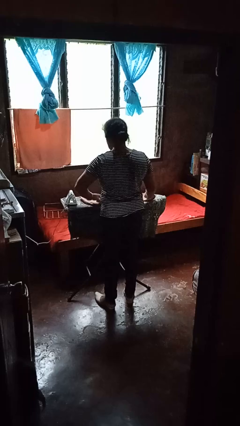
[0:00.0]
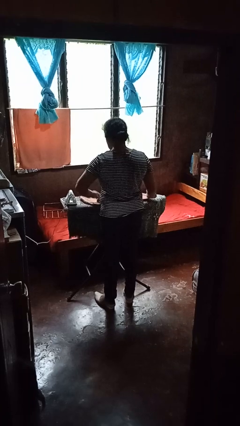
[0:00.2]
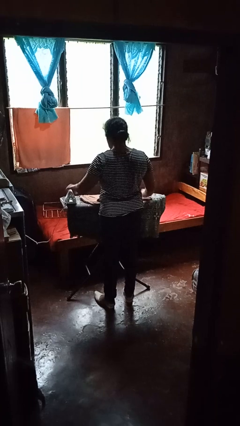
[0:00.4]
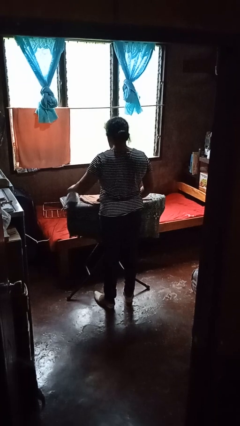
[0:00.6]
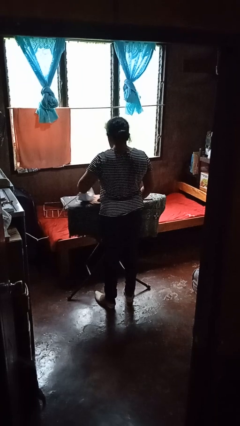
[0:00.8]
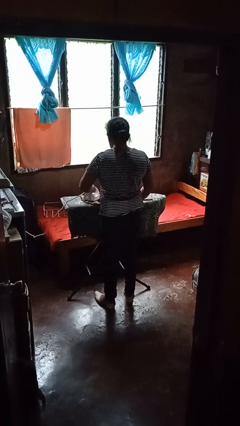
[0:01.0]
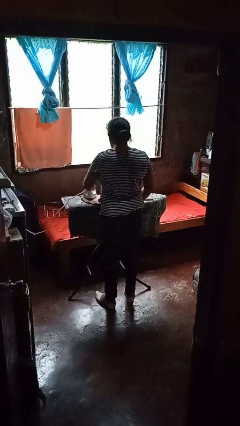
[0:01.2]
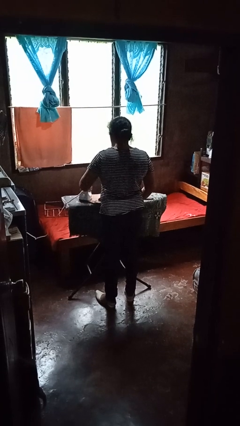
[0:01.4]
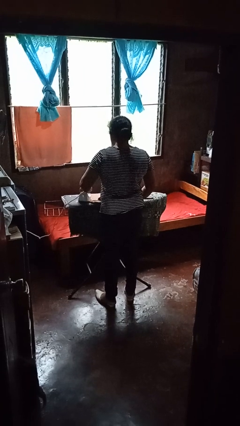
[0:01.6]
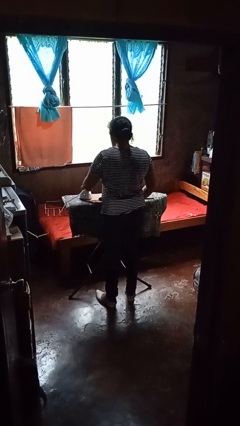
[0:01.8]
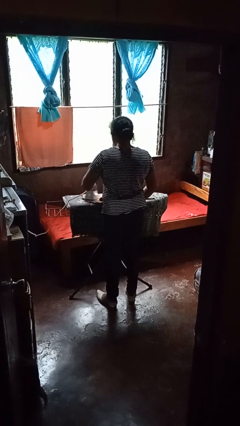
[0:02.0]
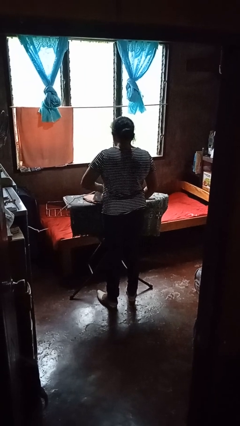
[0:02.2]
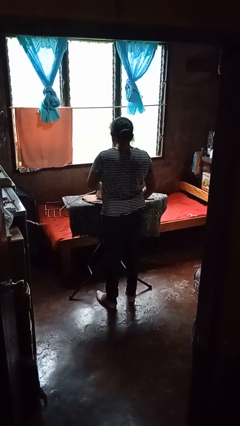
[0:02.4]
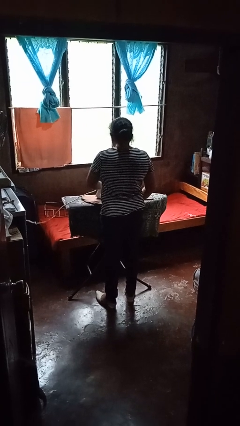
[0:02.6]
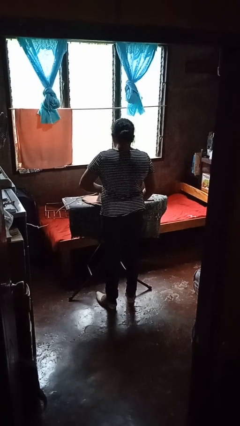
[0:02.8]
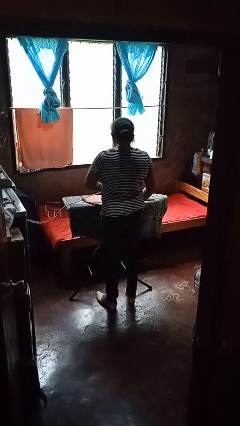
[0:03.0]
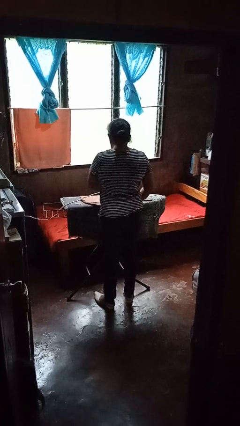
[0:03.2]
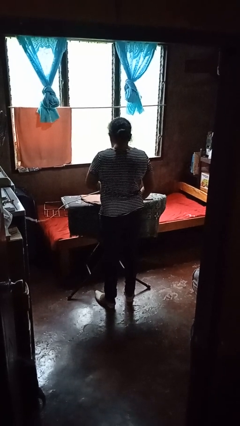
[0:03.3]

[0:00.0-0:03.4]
person irons clothes

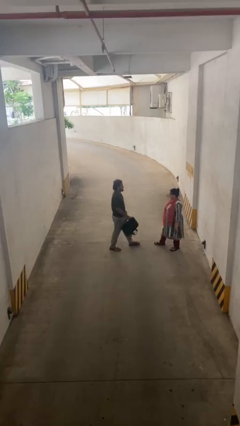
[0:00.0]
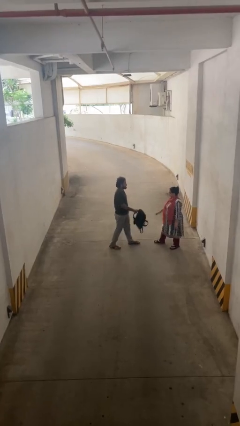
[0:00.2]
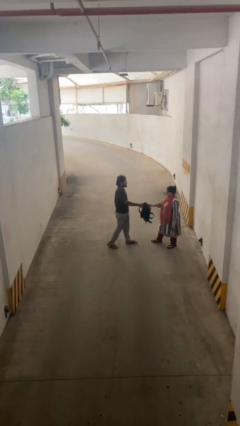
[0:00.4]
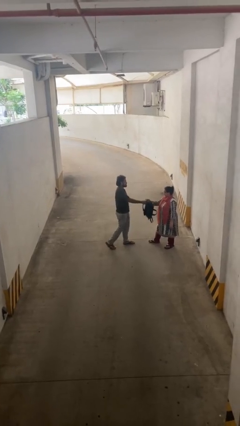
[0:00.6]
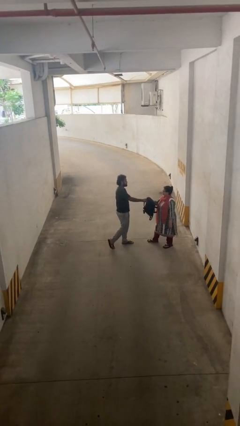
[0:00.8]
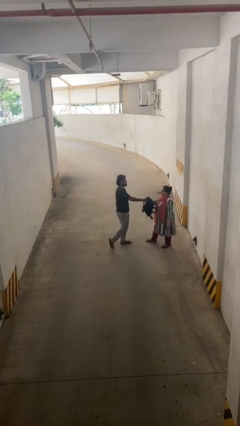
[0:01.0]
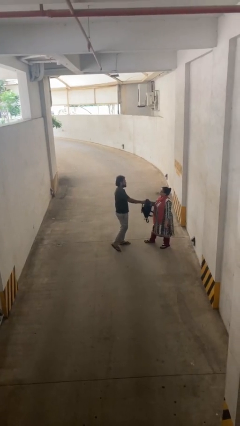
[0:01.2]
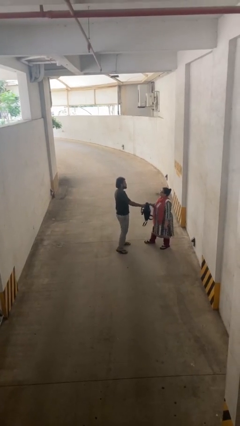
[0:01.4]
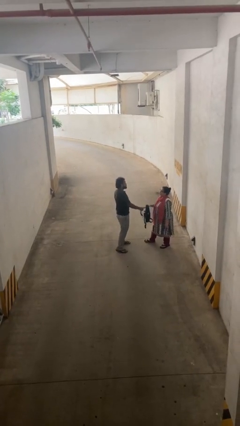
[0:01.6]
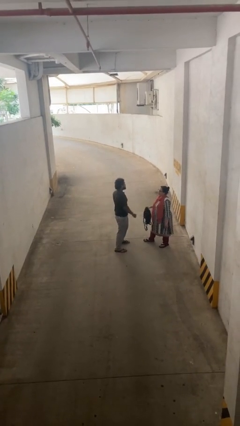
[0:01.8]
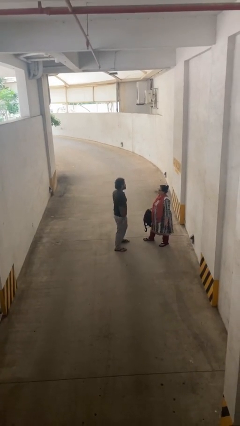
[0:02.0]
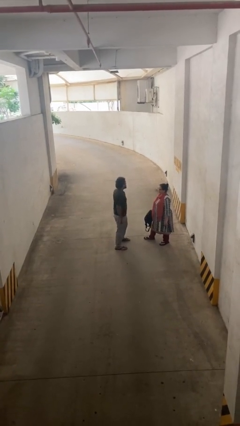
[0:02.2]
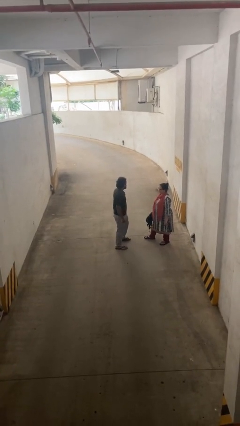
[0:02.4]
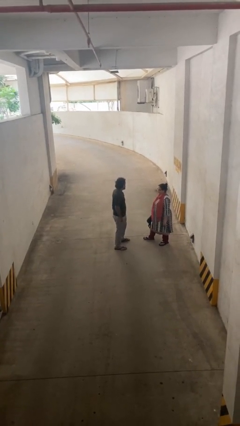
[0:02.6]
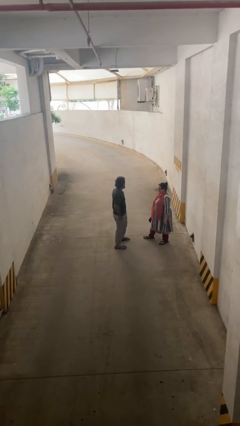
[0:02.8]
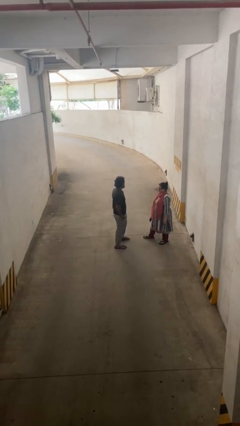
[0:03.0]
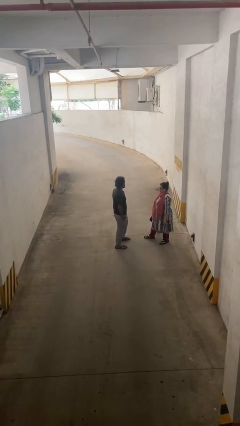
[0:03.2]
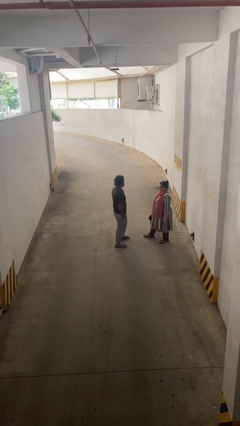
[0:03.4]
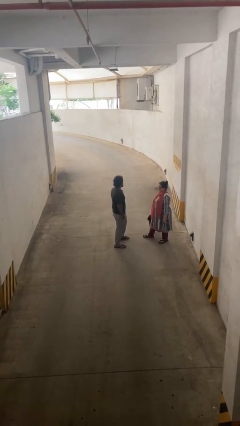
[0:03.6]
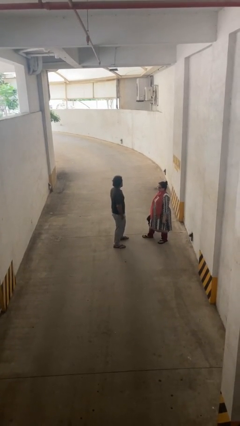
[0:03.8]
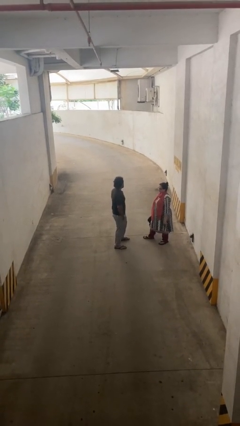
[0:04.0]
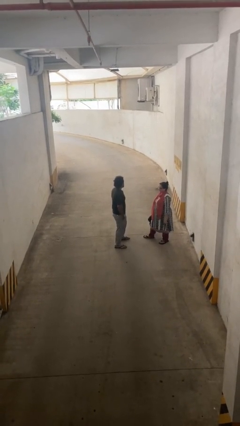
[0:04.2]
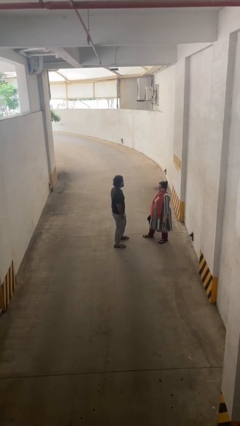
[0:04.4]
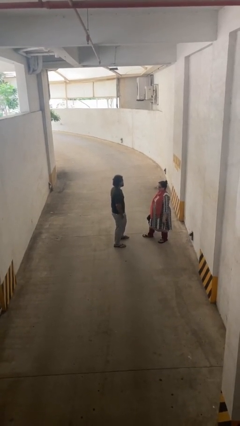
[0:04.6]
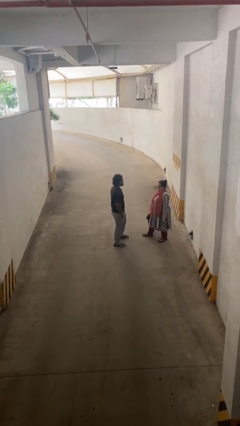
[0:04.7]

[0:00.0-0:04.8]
person transfers object to person

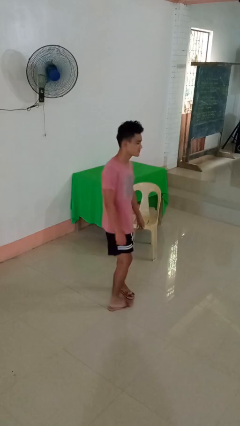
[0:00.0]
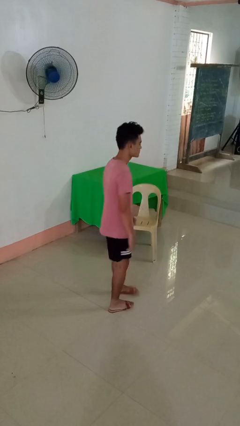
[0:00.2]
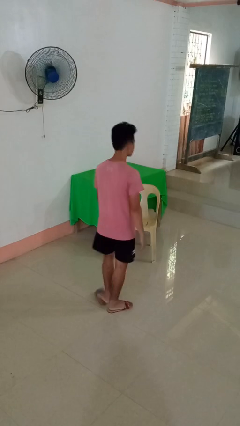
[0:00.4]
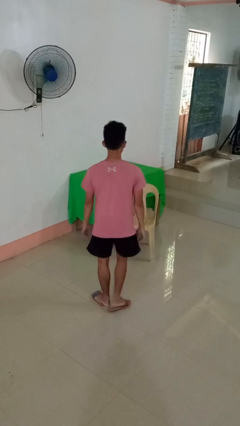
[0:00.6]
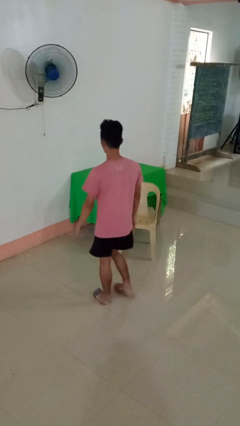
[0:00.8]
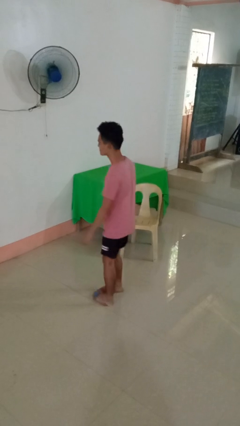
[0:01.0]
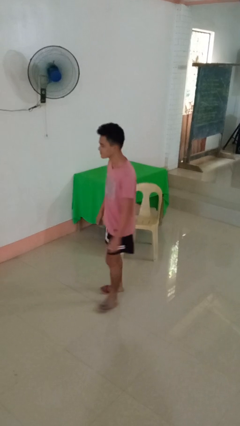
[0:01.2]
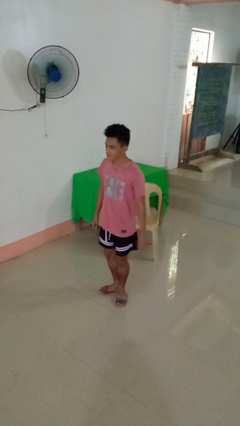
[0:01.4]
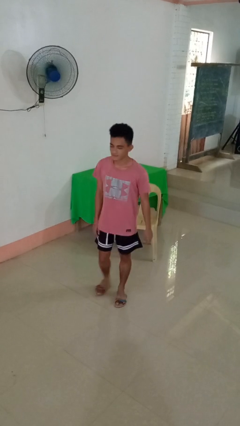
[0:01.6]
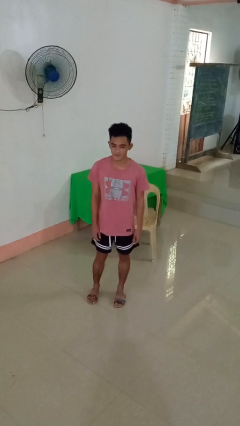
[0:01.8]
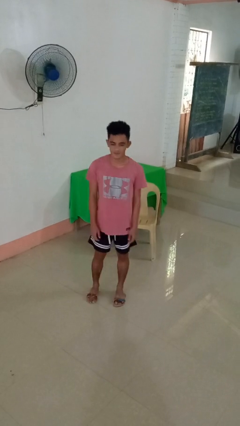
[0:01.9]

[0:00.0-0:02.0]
person twirls

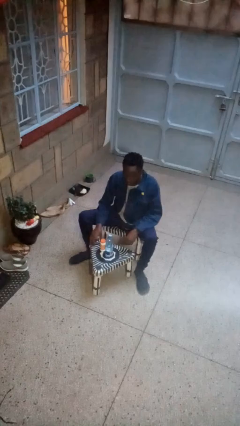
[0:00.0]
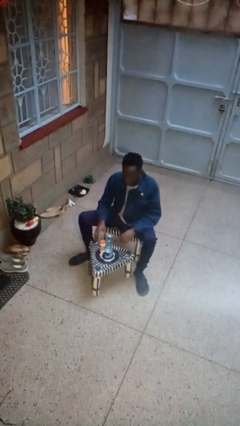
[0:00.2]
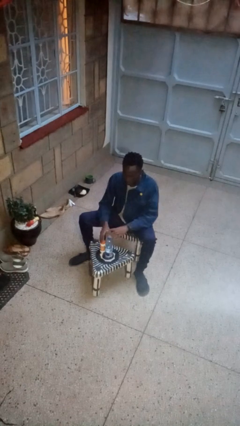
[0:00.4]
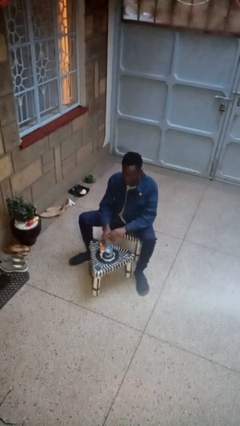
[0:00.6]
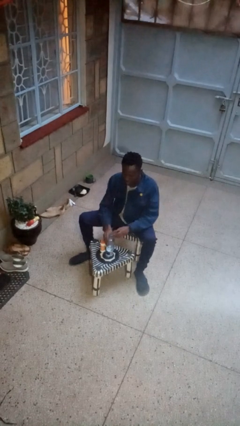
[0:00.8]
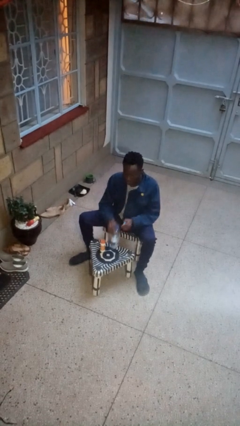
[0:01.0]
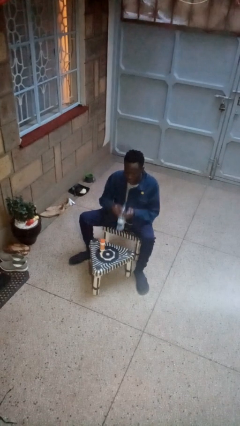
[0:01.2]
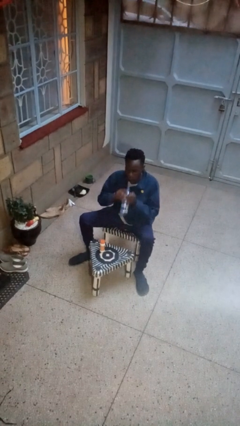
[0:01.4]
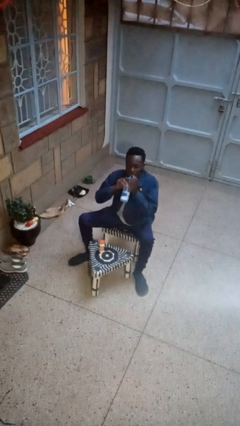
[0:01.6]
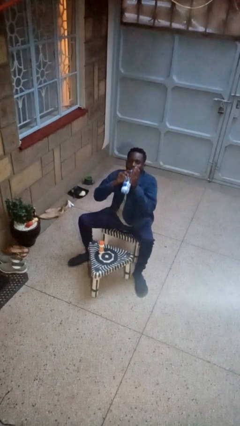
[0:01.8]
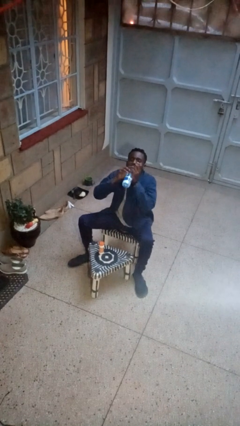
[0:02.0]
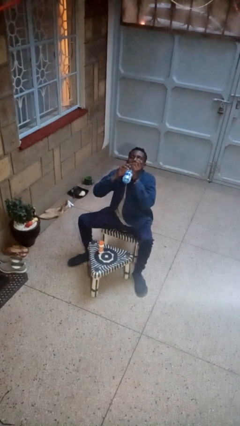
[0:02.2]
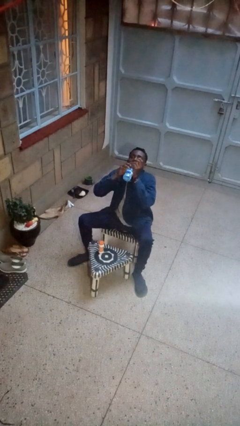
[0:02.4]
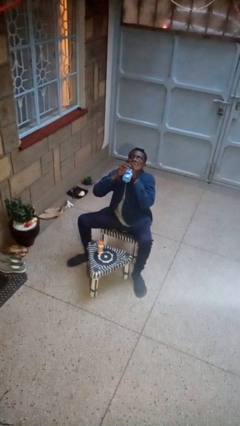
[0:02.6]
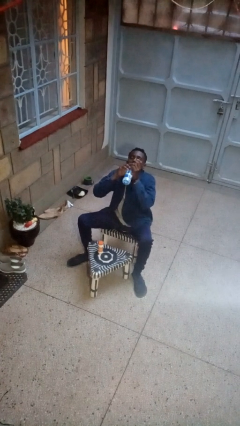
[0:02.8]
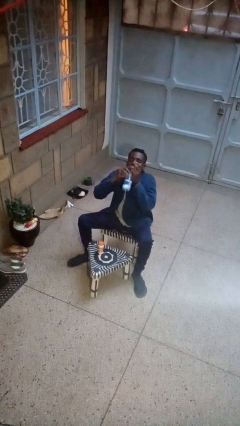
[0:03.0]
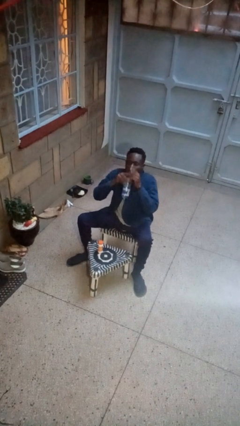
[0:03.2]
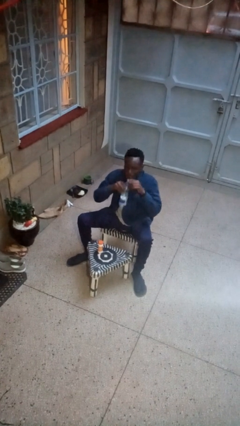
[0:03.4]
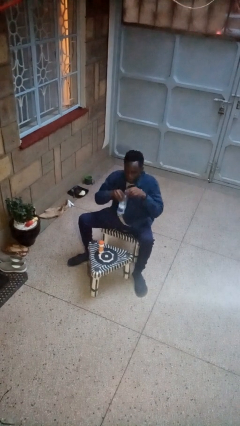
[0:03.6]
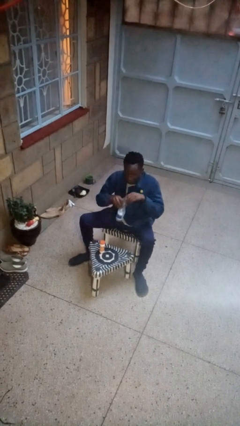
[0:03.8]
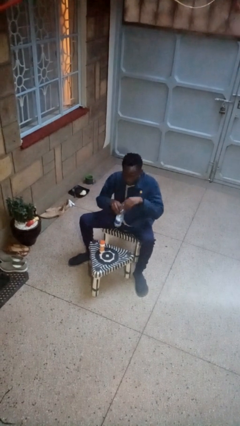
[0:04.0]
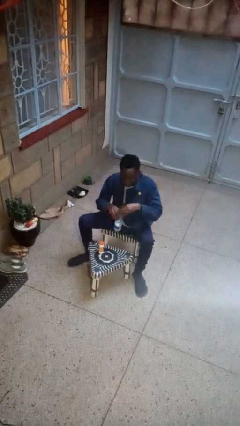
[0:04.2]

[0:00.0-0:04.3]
person drinks from cup

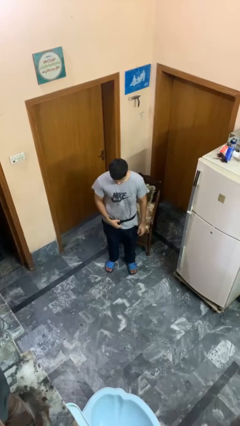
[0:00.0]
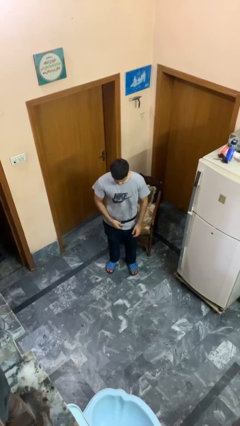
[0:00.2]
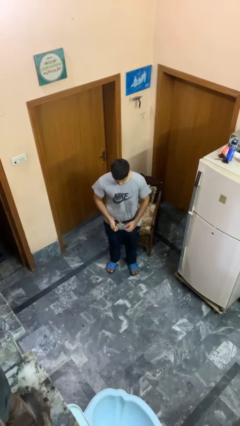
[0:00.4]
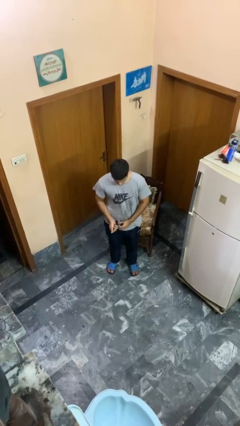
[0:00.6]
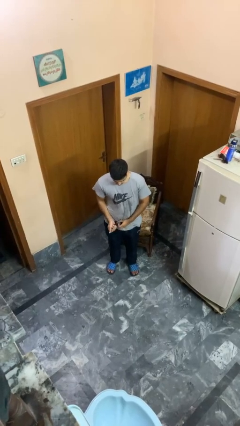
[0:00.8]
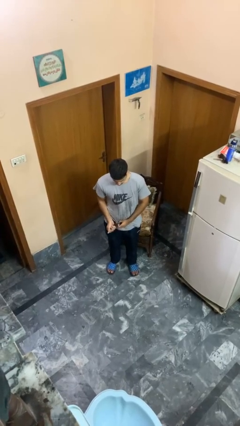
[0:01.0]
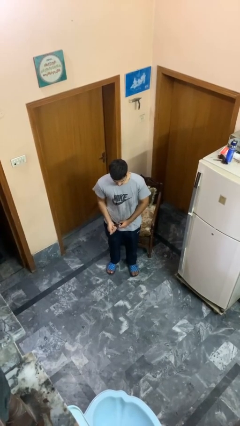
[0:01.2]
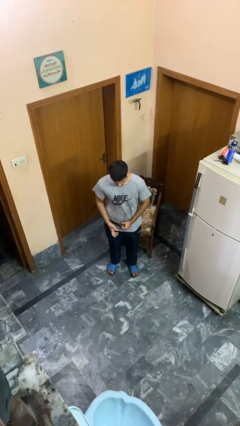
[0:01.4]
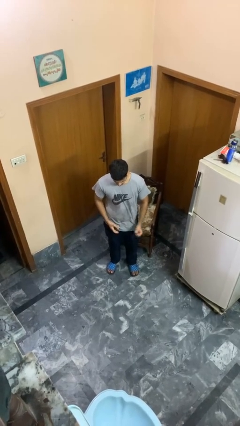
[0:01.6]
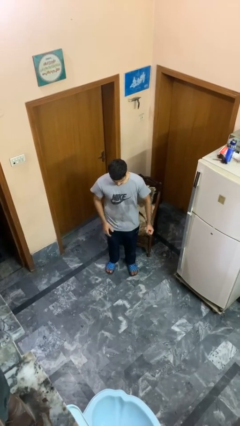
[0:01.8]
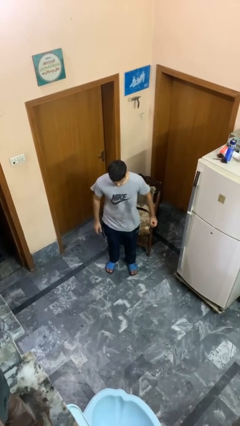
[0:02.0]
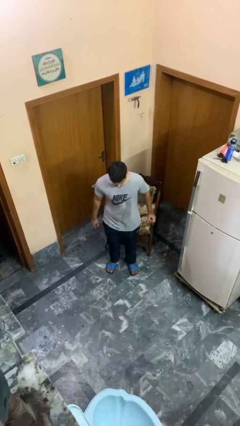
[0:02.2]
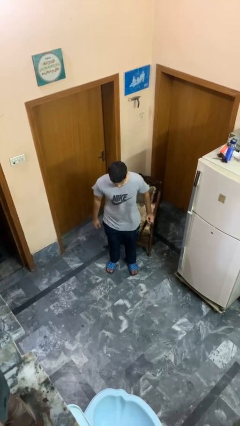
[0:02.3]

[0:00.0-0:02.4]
person takes off belt

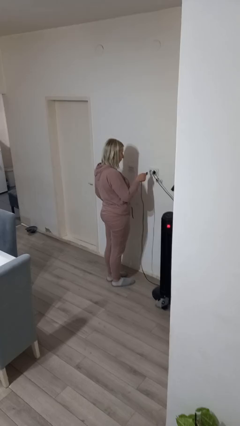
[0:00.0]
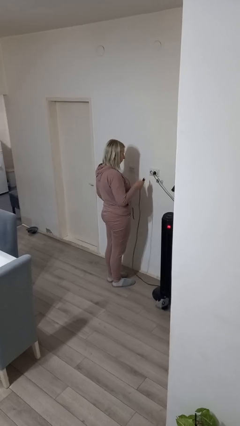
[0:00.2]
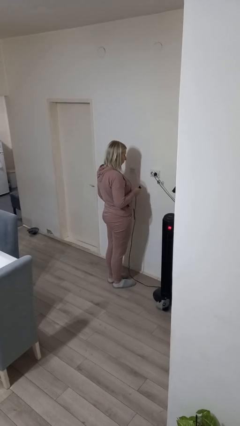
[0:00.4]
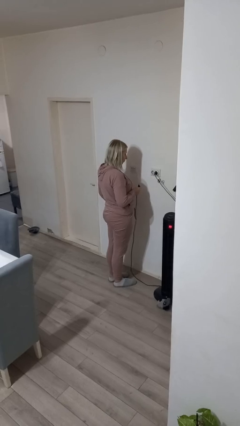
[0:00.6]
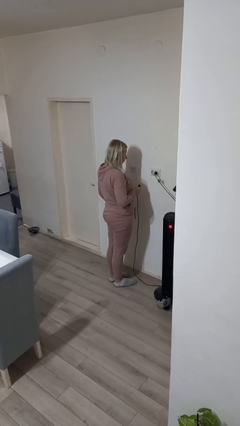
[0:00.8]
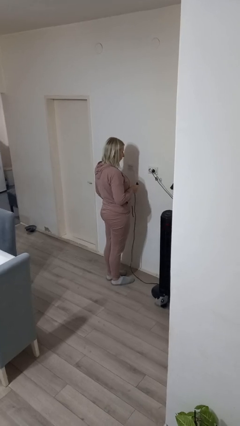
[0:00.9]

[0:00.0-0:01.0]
person unplugs from electrical socket
